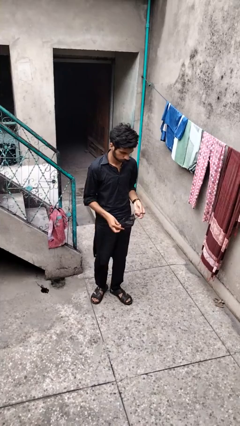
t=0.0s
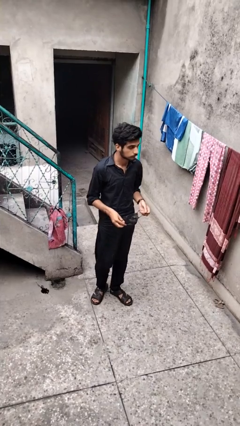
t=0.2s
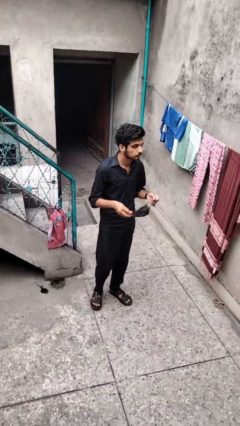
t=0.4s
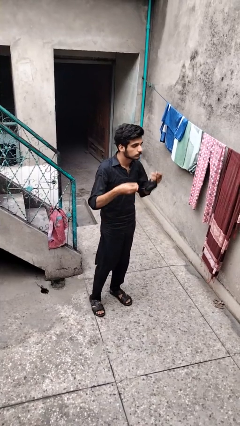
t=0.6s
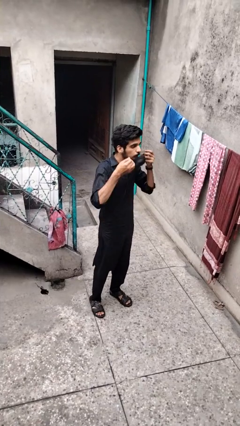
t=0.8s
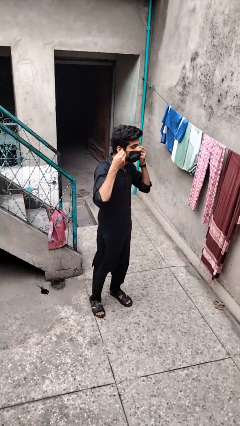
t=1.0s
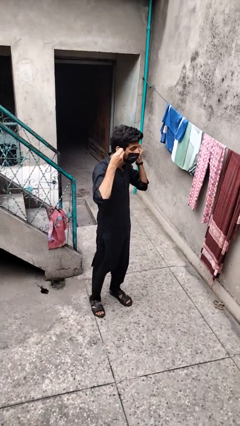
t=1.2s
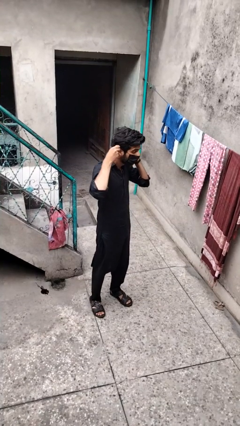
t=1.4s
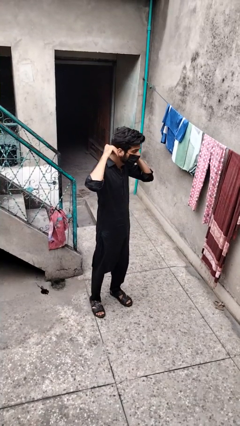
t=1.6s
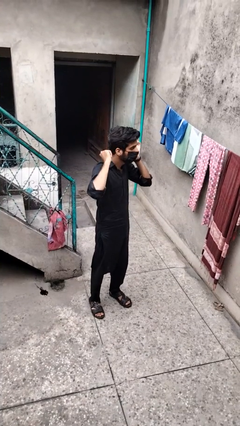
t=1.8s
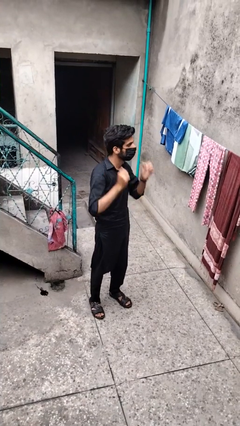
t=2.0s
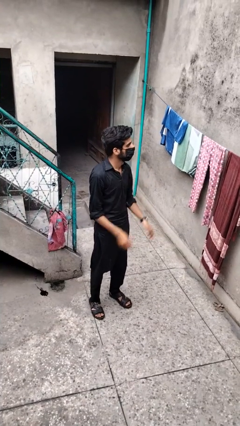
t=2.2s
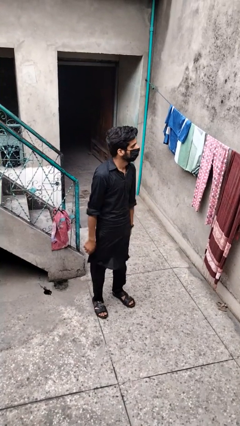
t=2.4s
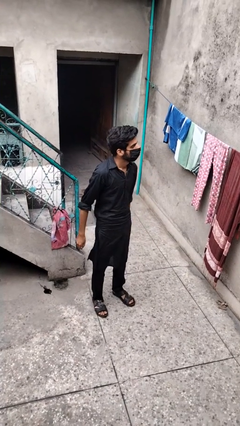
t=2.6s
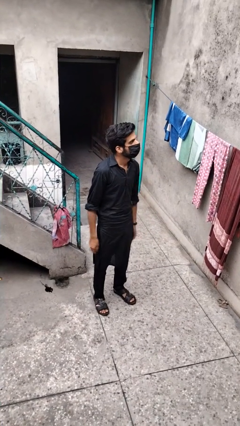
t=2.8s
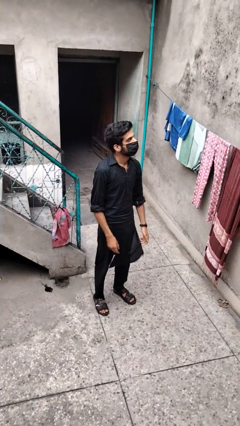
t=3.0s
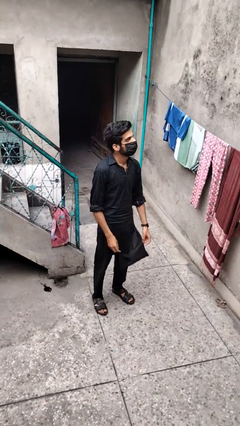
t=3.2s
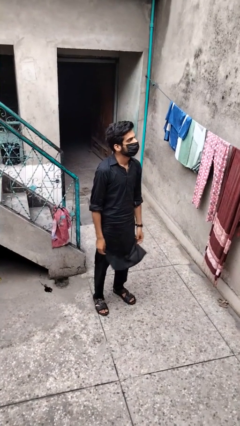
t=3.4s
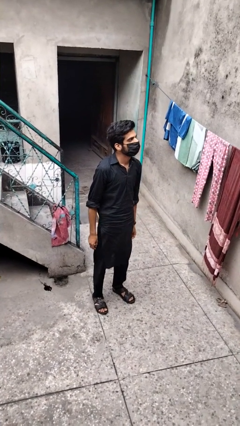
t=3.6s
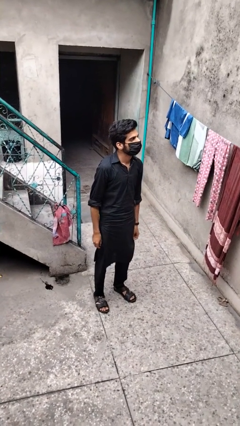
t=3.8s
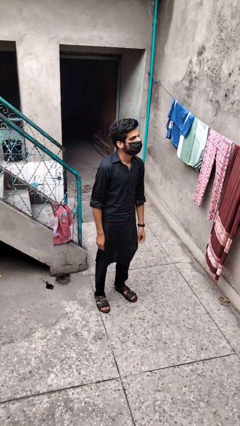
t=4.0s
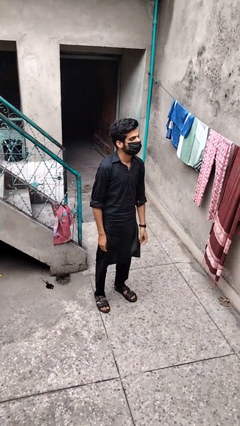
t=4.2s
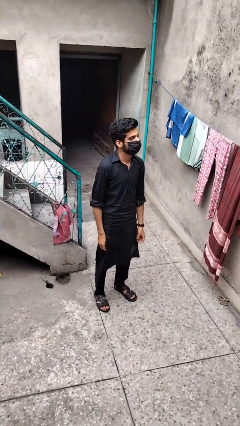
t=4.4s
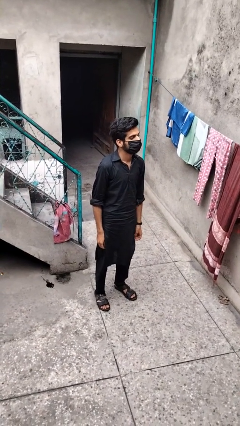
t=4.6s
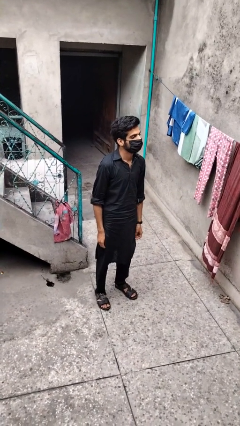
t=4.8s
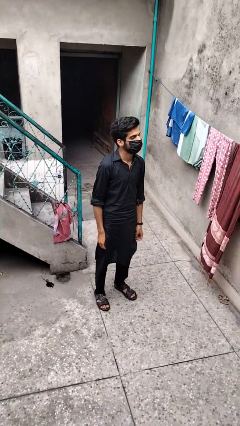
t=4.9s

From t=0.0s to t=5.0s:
person puts on facemask

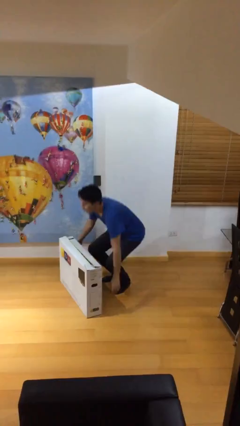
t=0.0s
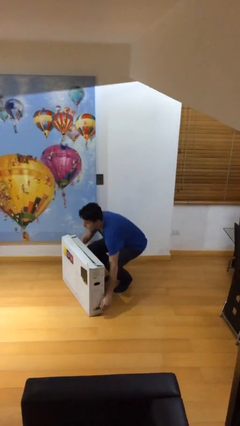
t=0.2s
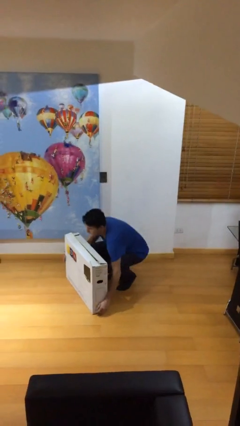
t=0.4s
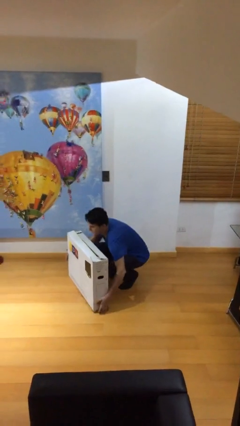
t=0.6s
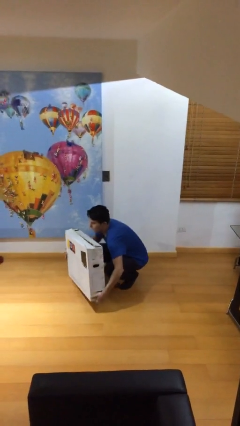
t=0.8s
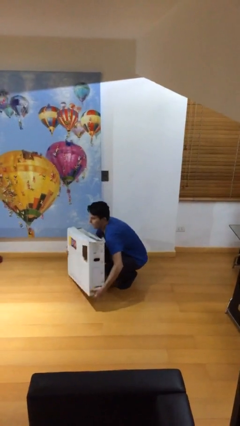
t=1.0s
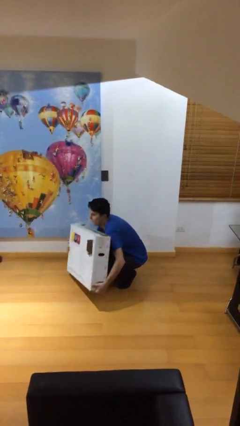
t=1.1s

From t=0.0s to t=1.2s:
person picks up object from floor

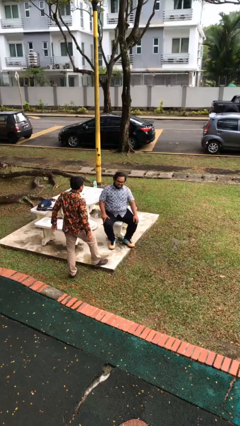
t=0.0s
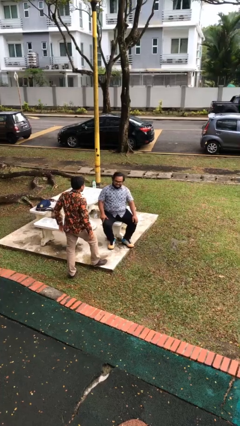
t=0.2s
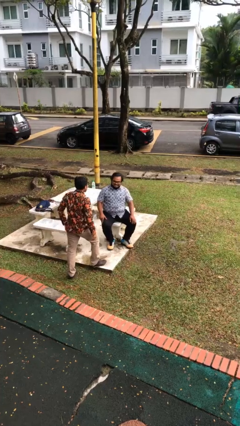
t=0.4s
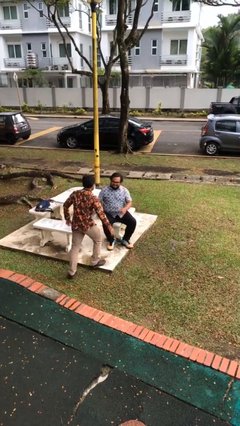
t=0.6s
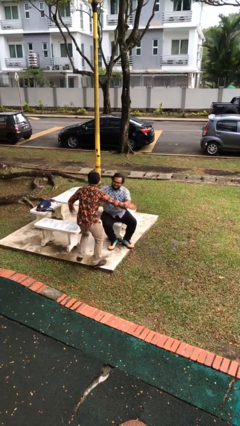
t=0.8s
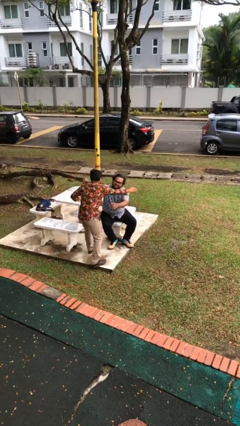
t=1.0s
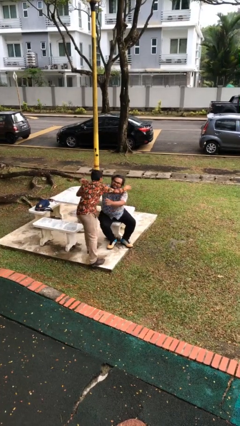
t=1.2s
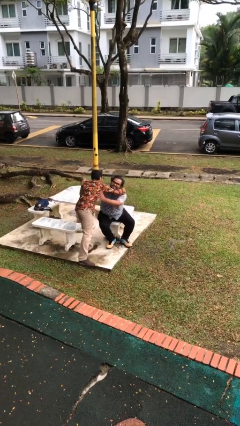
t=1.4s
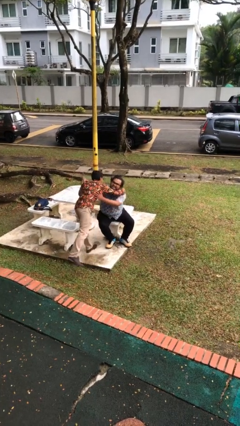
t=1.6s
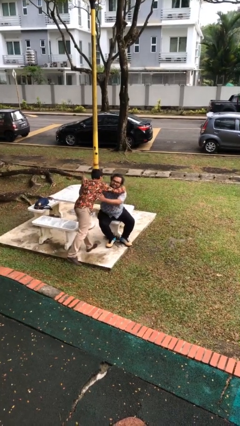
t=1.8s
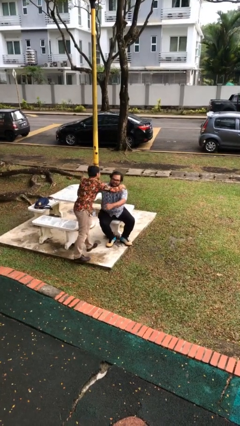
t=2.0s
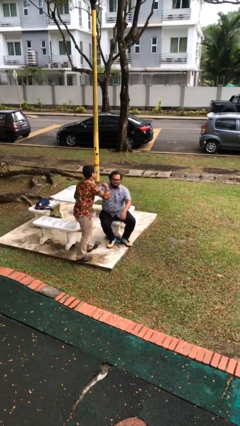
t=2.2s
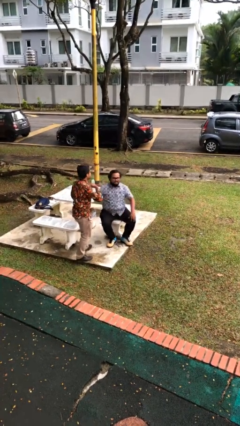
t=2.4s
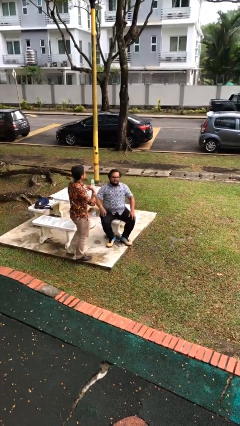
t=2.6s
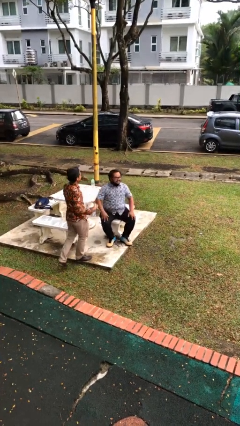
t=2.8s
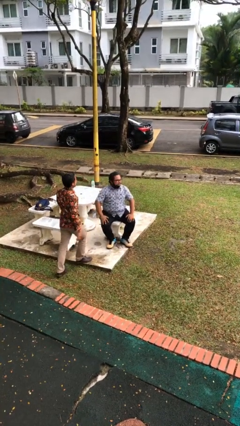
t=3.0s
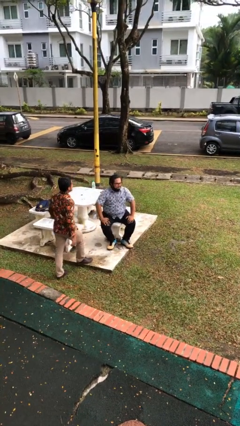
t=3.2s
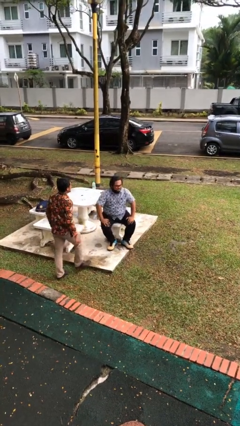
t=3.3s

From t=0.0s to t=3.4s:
person embraces person

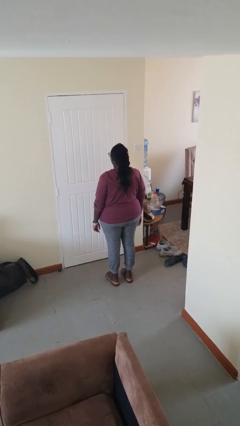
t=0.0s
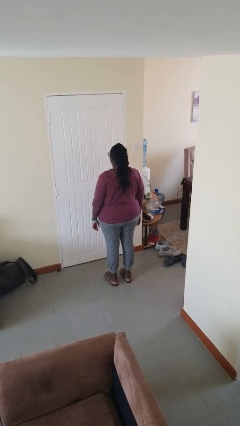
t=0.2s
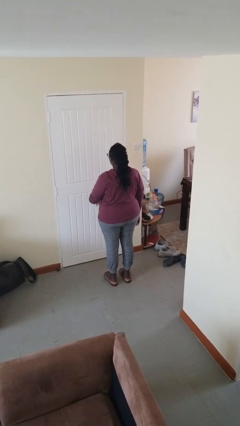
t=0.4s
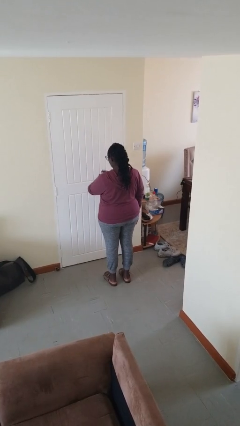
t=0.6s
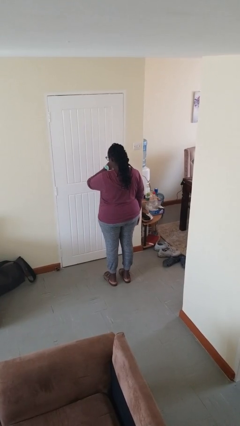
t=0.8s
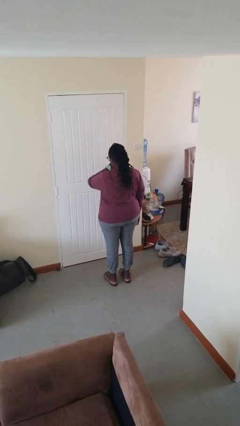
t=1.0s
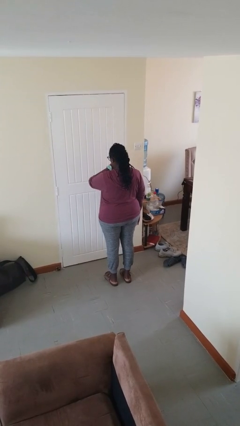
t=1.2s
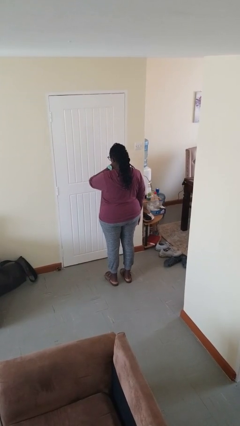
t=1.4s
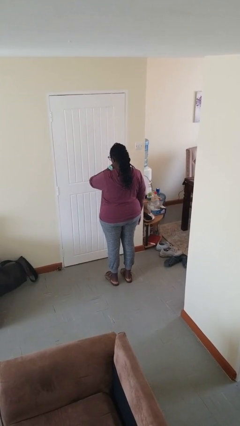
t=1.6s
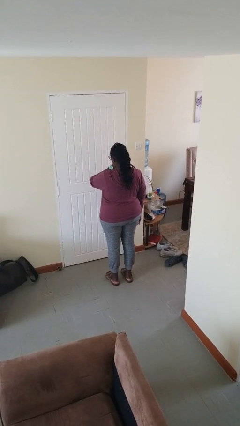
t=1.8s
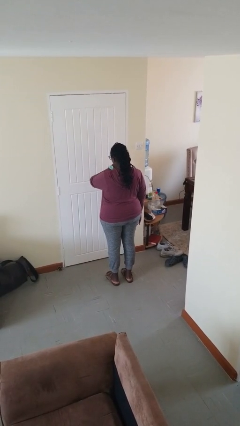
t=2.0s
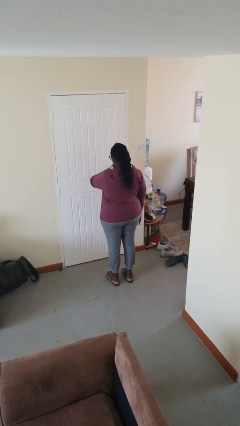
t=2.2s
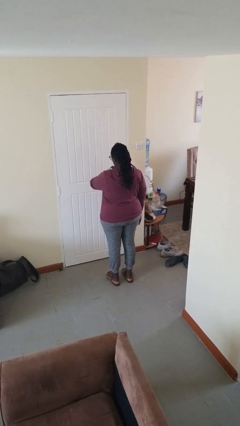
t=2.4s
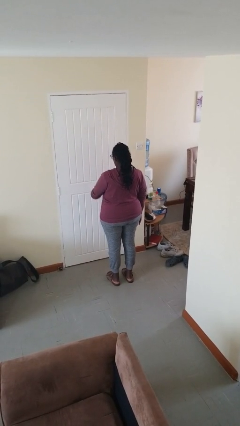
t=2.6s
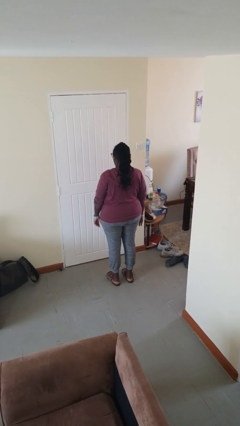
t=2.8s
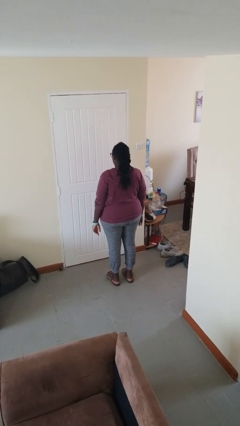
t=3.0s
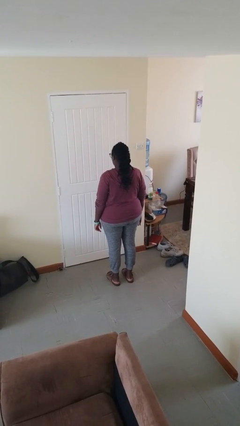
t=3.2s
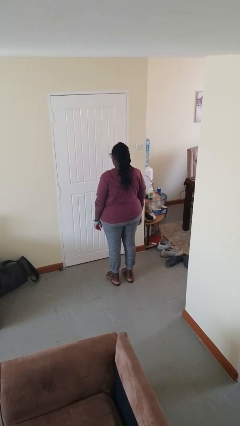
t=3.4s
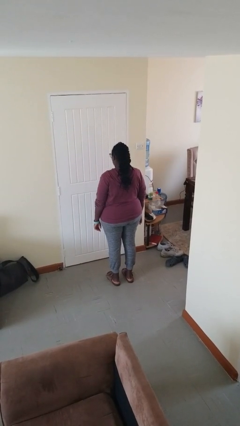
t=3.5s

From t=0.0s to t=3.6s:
person looks at wristwatch

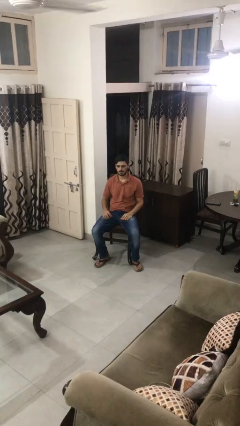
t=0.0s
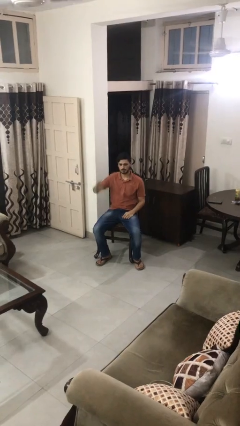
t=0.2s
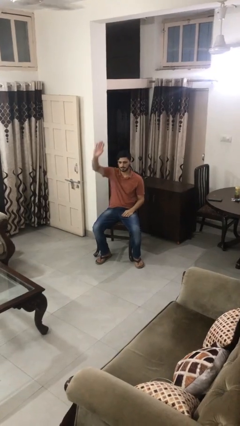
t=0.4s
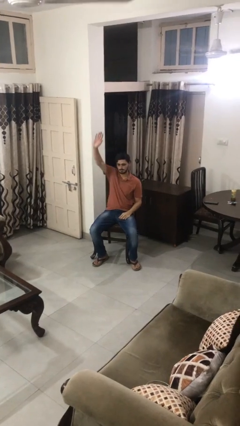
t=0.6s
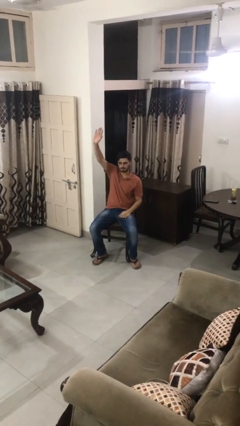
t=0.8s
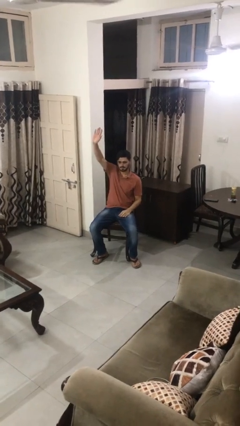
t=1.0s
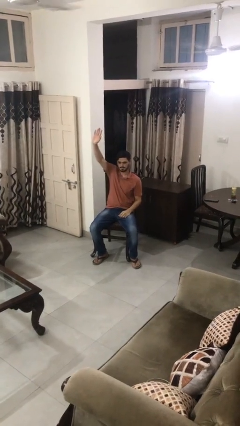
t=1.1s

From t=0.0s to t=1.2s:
person gestures raise hand

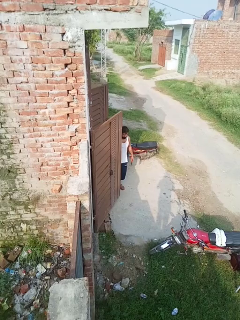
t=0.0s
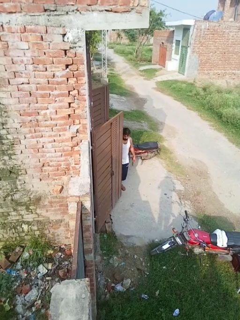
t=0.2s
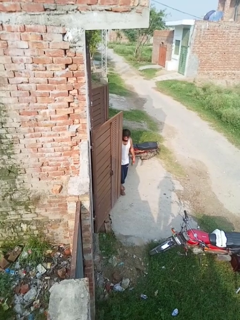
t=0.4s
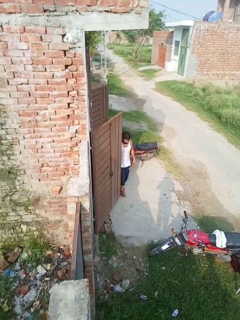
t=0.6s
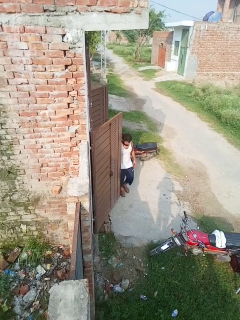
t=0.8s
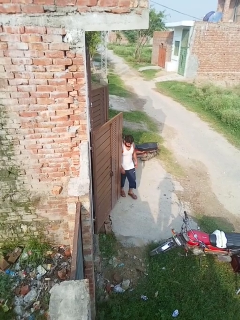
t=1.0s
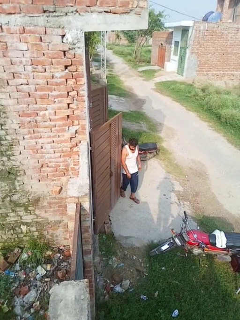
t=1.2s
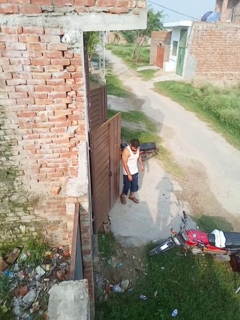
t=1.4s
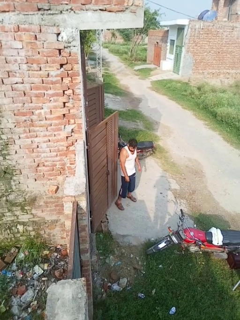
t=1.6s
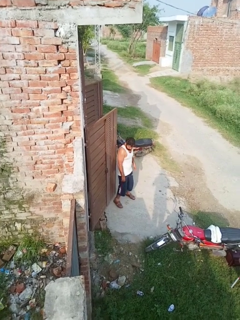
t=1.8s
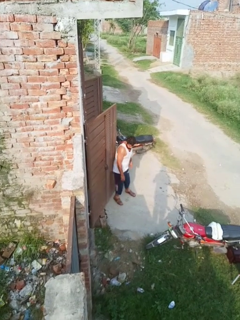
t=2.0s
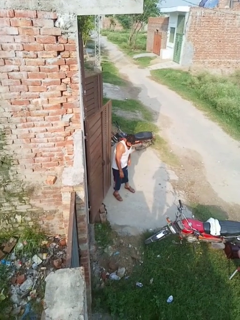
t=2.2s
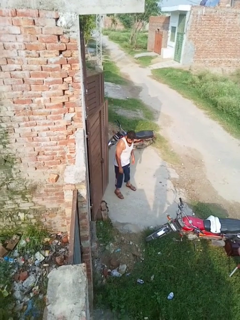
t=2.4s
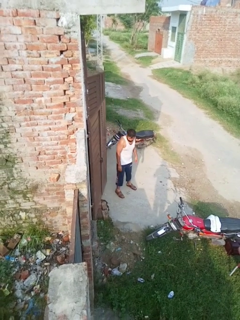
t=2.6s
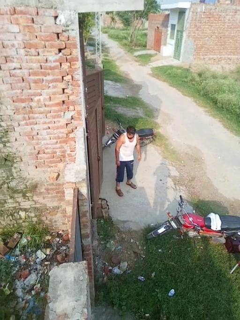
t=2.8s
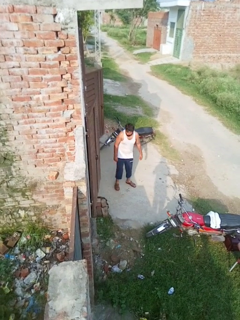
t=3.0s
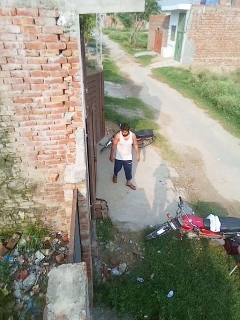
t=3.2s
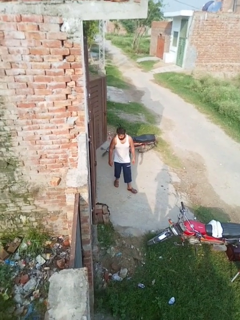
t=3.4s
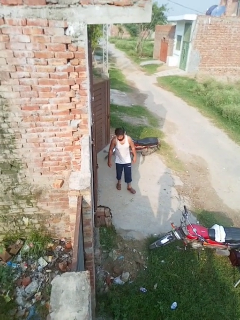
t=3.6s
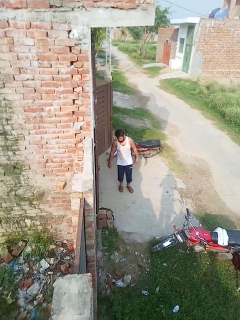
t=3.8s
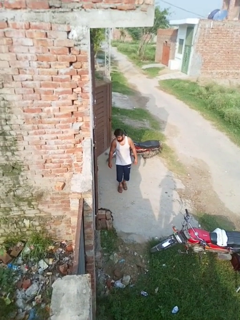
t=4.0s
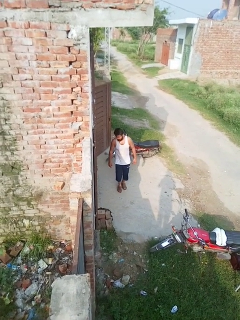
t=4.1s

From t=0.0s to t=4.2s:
person closes door with hip
